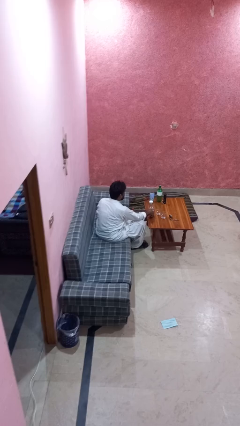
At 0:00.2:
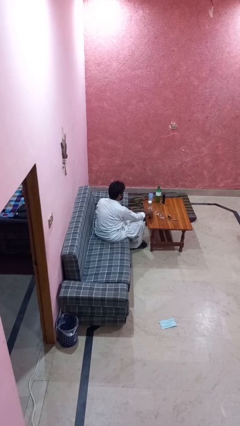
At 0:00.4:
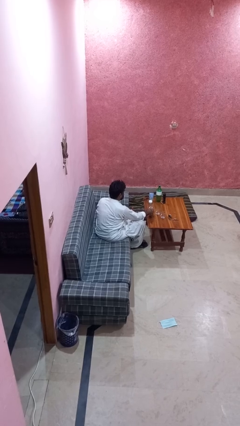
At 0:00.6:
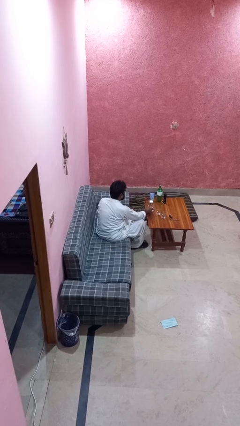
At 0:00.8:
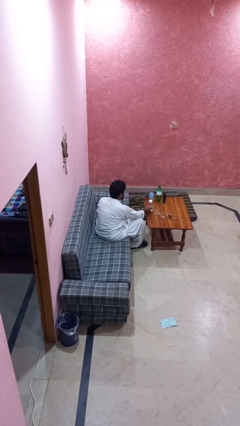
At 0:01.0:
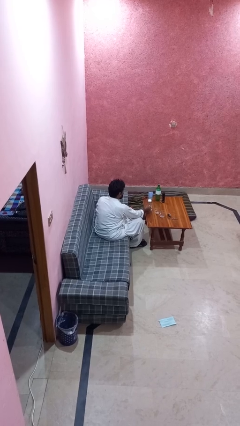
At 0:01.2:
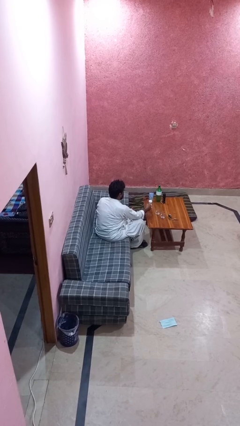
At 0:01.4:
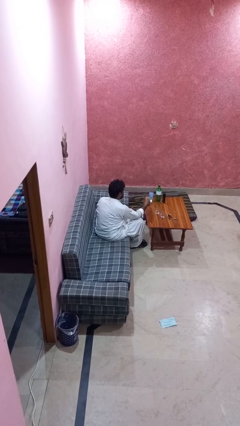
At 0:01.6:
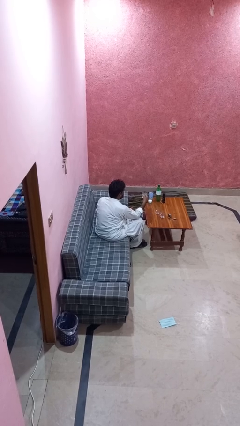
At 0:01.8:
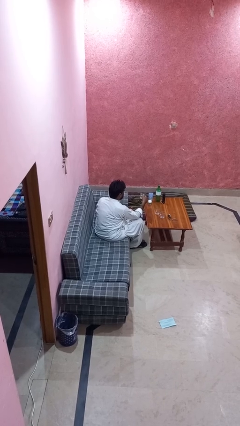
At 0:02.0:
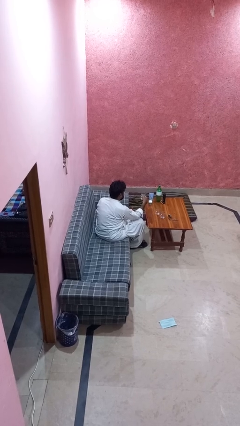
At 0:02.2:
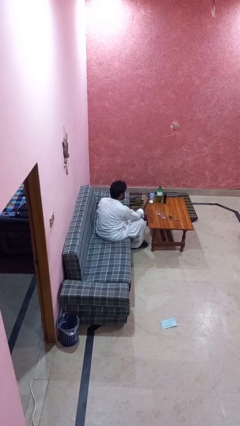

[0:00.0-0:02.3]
person picks up object from table

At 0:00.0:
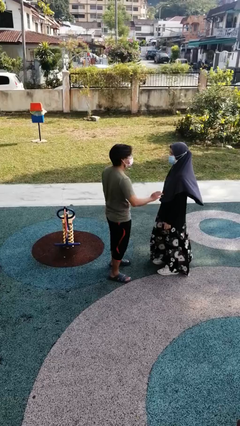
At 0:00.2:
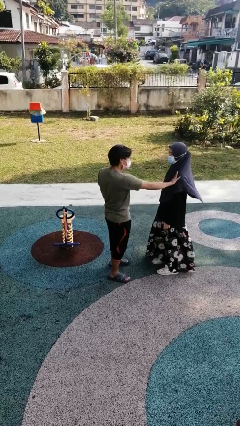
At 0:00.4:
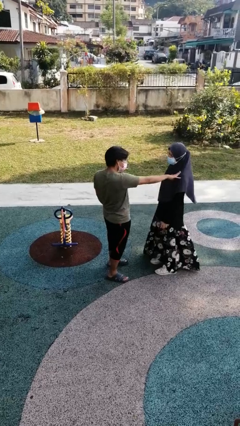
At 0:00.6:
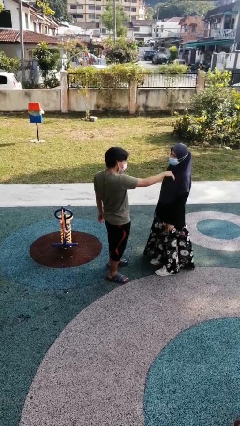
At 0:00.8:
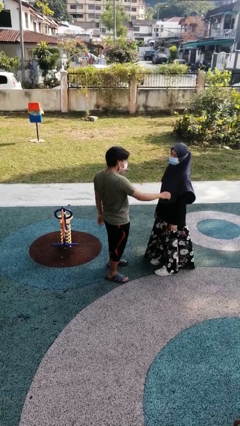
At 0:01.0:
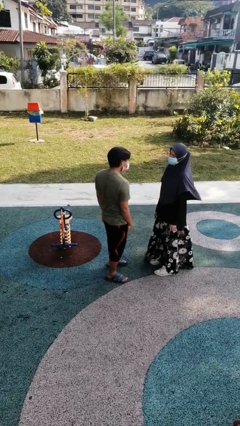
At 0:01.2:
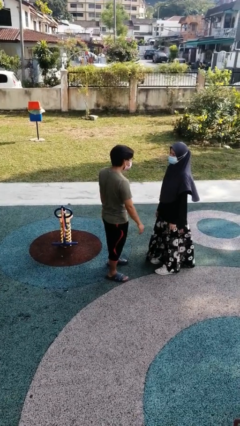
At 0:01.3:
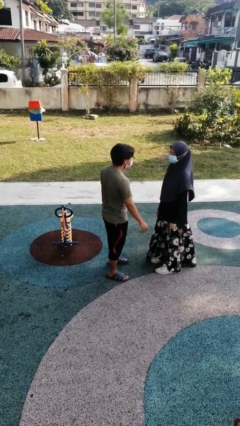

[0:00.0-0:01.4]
person shoves person

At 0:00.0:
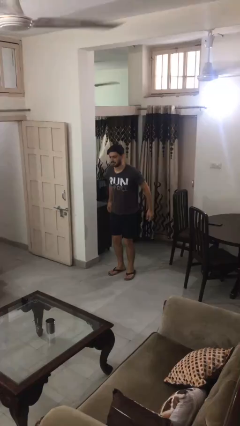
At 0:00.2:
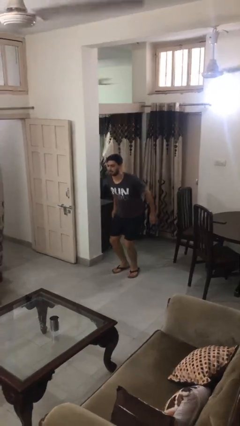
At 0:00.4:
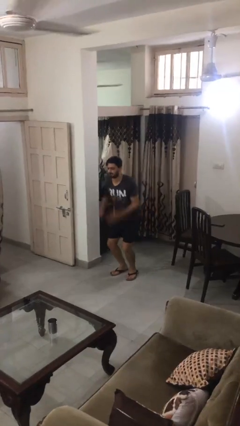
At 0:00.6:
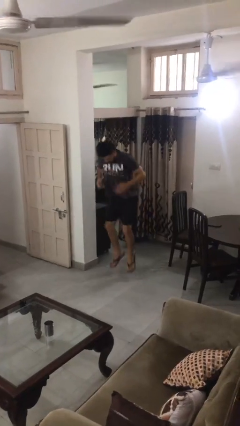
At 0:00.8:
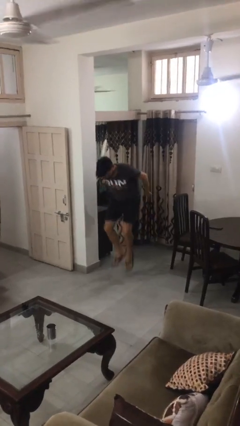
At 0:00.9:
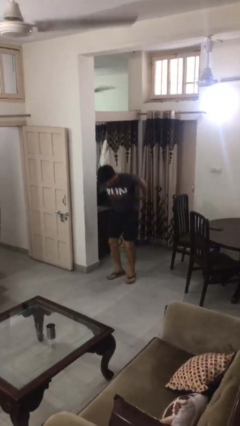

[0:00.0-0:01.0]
person jumps

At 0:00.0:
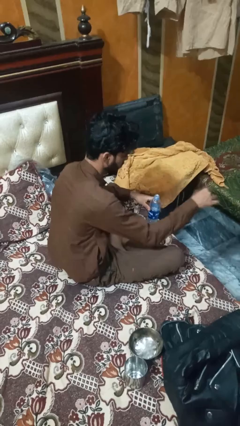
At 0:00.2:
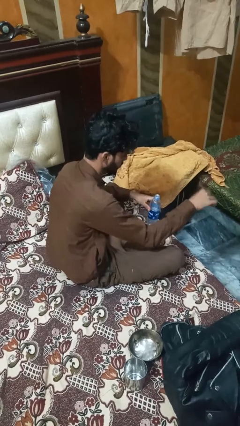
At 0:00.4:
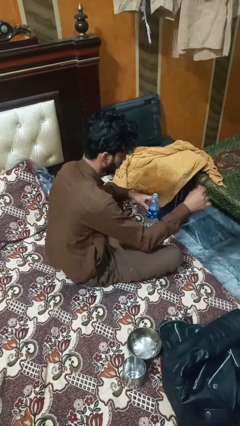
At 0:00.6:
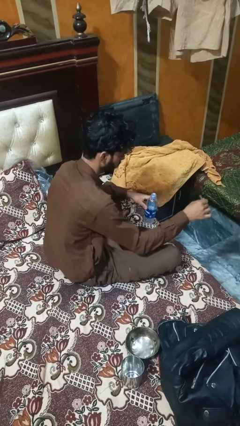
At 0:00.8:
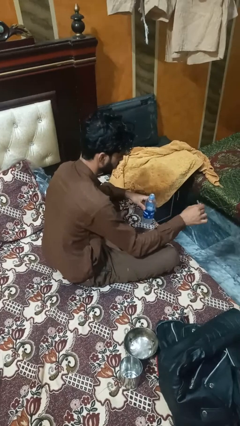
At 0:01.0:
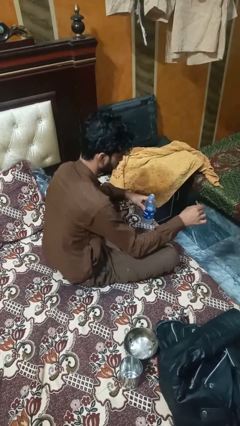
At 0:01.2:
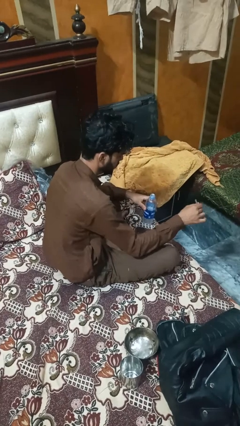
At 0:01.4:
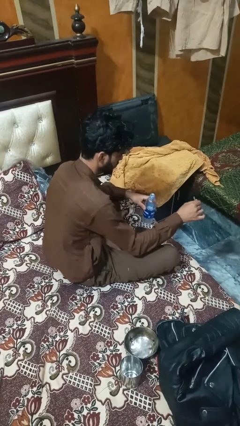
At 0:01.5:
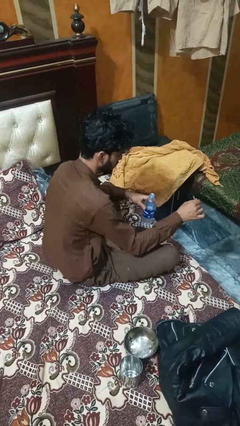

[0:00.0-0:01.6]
person pours liquid into cup

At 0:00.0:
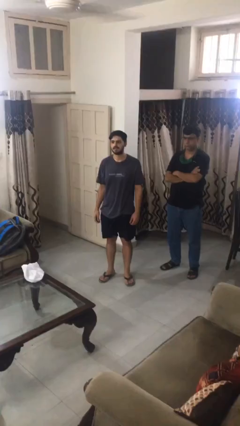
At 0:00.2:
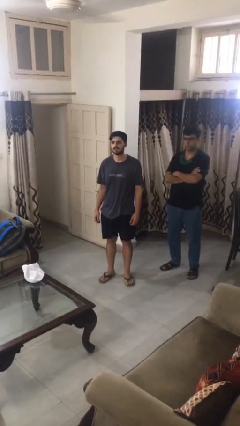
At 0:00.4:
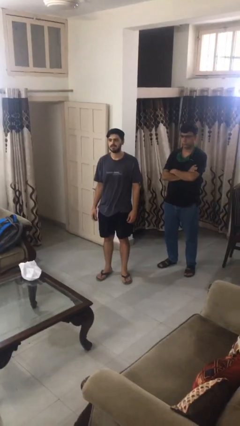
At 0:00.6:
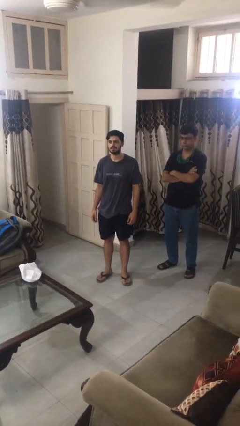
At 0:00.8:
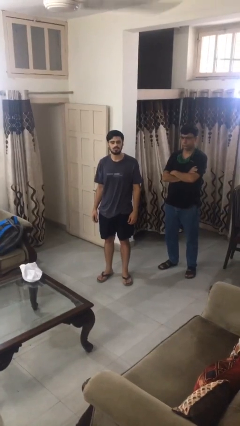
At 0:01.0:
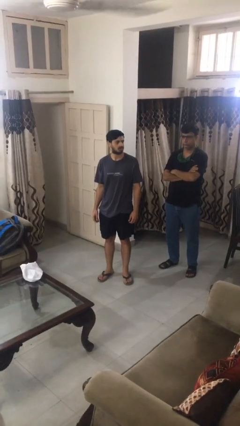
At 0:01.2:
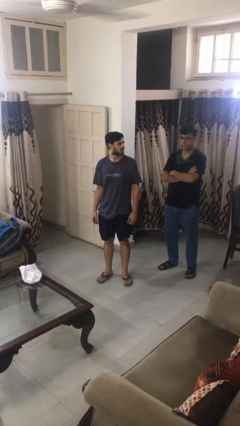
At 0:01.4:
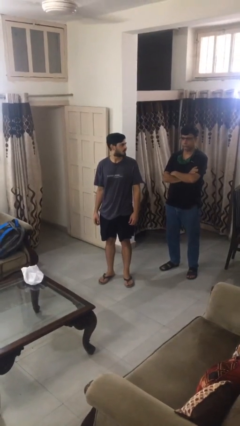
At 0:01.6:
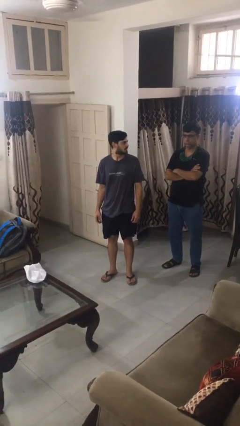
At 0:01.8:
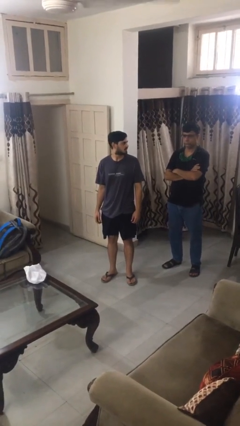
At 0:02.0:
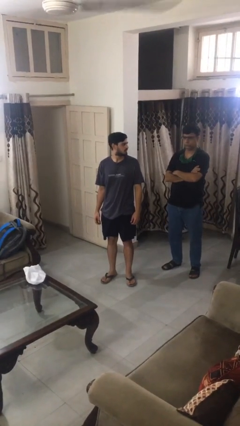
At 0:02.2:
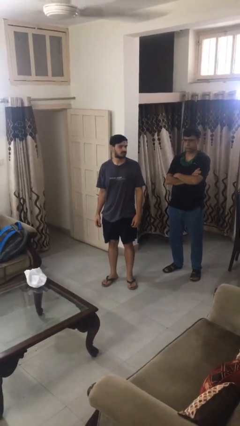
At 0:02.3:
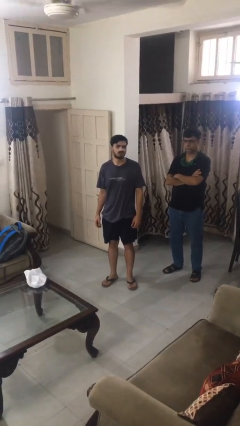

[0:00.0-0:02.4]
person looks over shoulder

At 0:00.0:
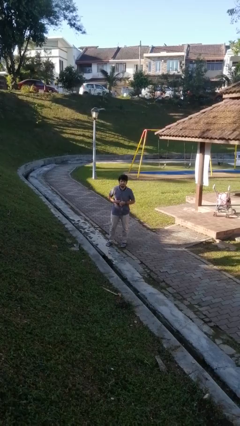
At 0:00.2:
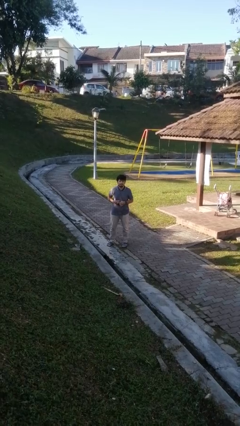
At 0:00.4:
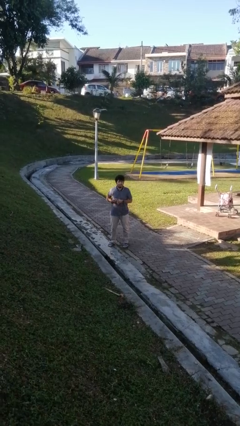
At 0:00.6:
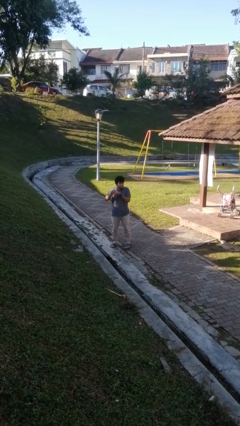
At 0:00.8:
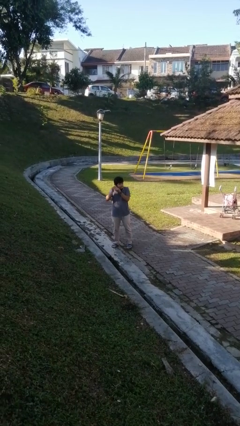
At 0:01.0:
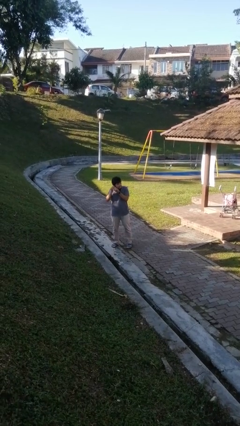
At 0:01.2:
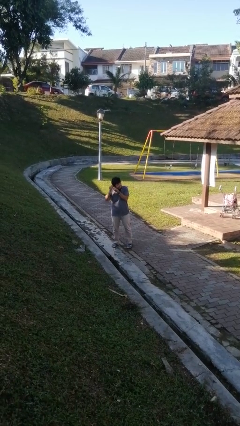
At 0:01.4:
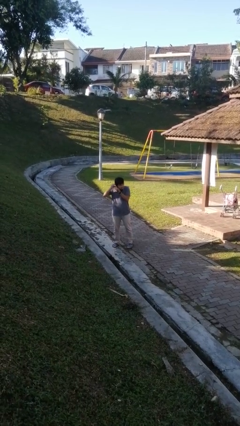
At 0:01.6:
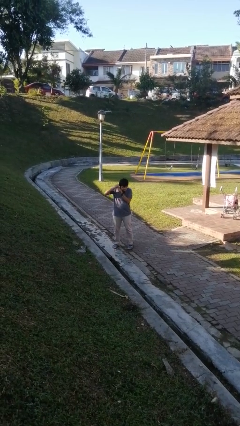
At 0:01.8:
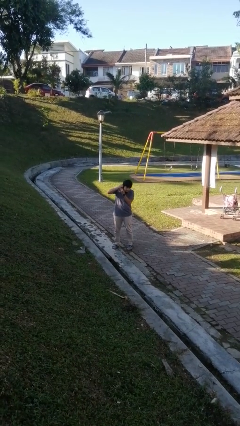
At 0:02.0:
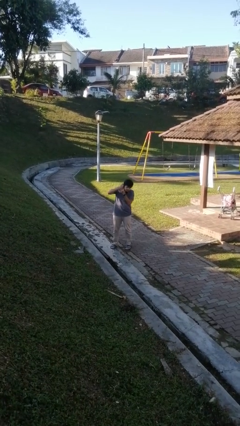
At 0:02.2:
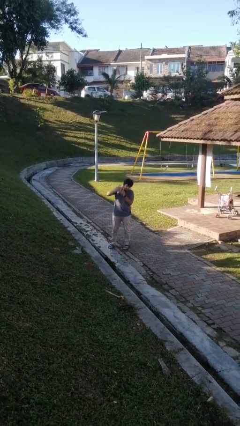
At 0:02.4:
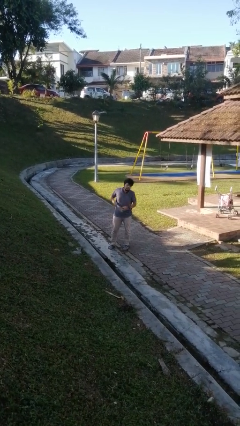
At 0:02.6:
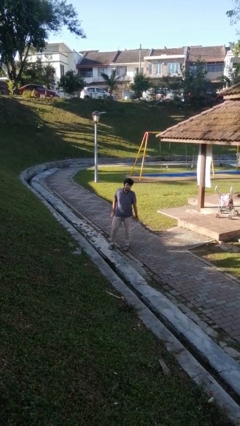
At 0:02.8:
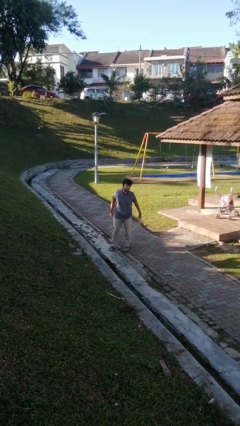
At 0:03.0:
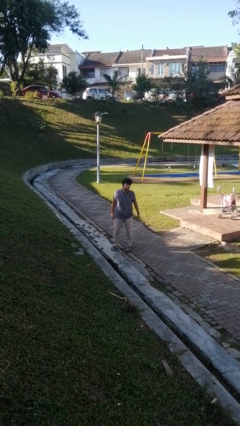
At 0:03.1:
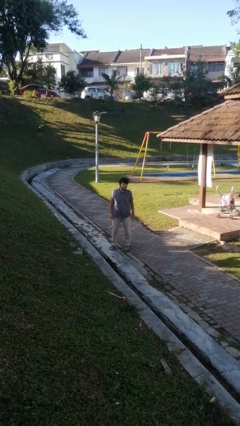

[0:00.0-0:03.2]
person puts on earrings

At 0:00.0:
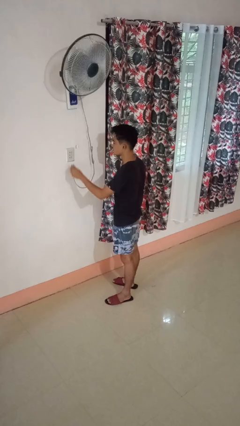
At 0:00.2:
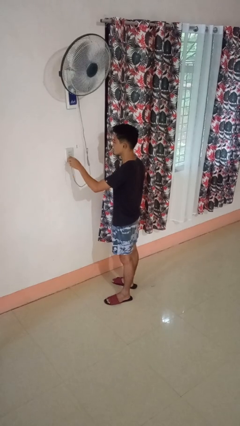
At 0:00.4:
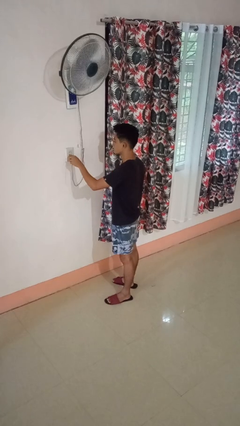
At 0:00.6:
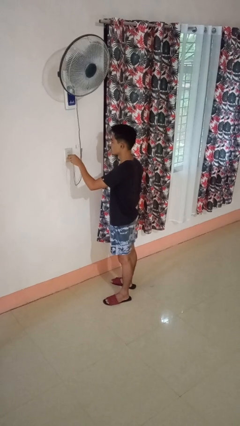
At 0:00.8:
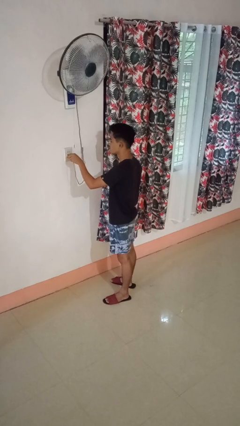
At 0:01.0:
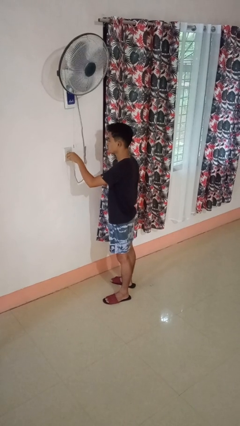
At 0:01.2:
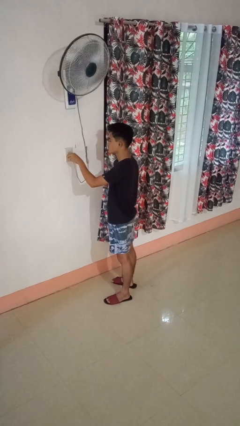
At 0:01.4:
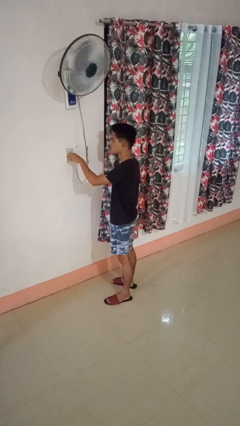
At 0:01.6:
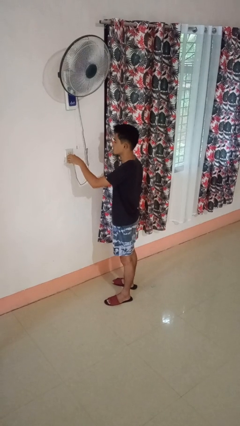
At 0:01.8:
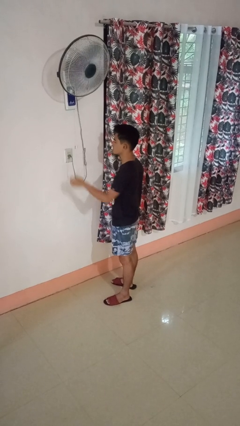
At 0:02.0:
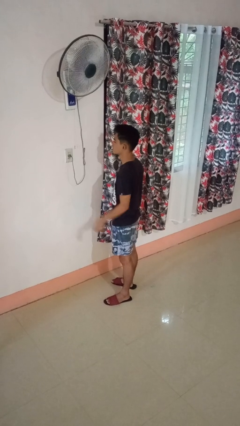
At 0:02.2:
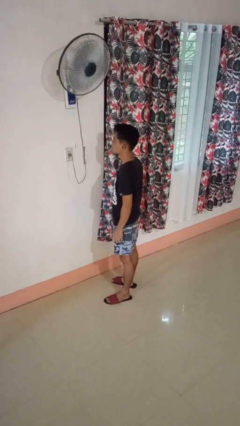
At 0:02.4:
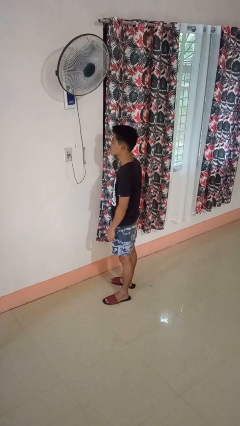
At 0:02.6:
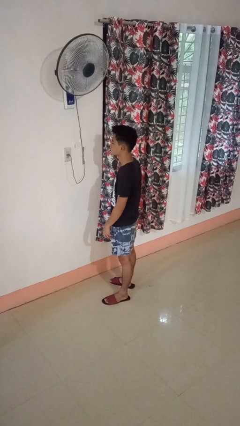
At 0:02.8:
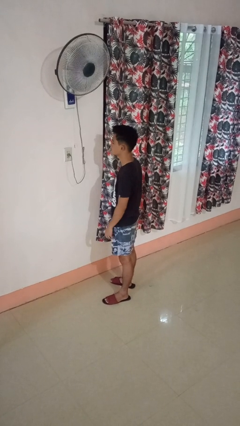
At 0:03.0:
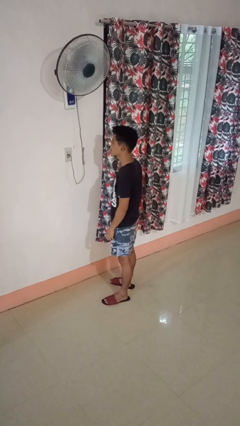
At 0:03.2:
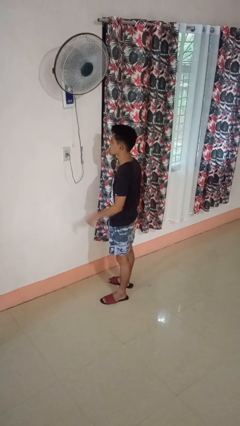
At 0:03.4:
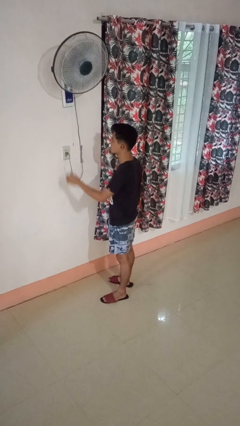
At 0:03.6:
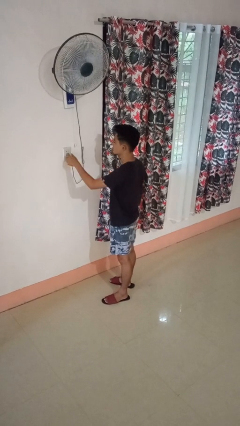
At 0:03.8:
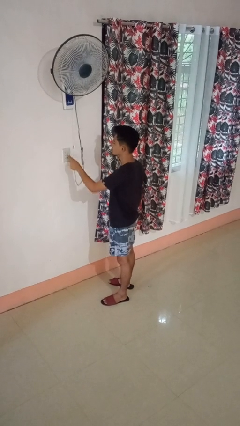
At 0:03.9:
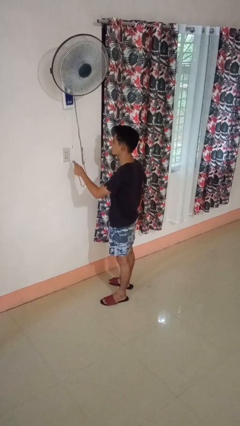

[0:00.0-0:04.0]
person plugs into electrical socket

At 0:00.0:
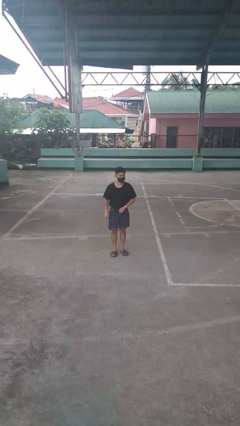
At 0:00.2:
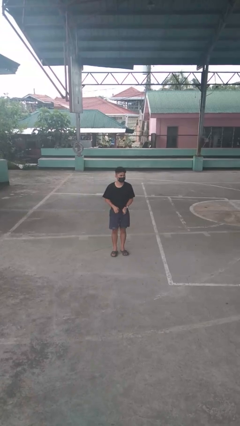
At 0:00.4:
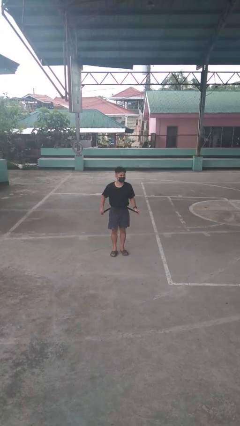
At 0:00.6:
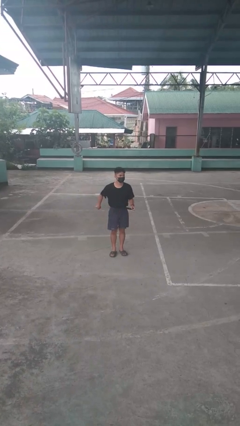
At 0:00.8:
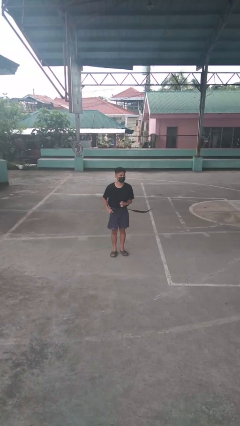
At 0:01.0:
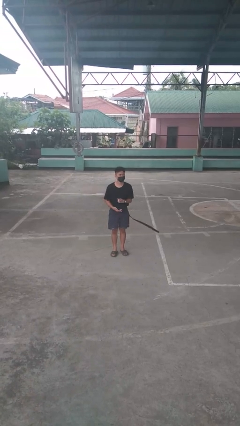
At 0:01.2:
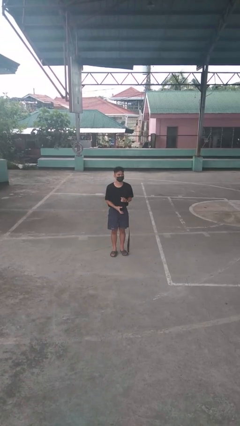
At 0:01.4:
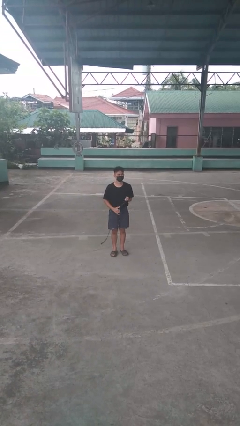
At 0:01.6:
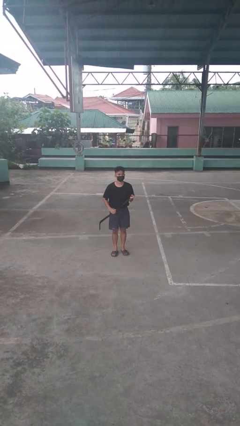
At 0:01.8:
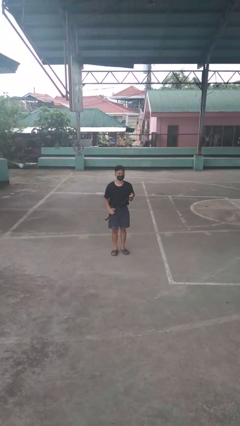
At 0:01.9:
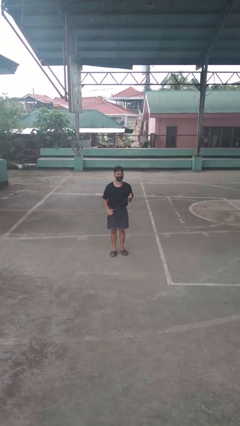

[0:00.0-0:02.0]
person takes off belt
